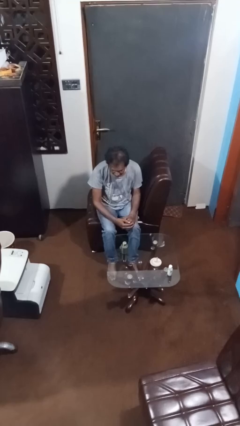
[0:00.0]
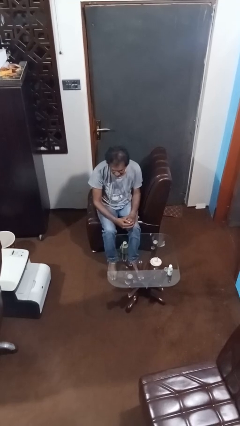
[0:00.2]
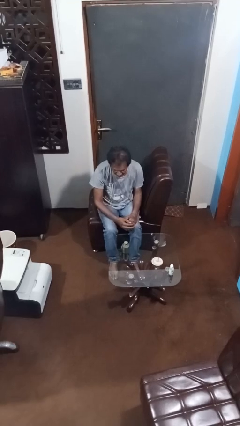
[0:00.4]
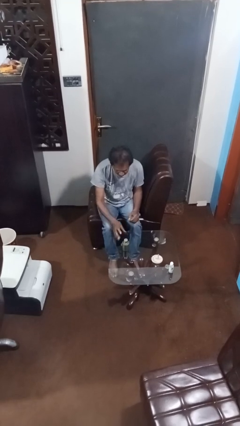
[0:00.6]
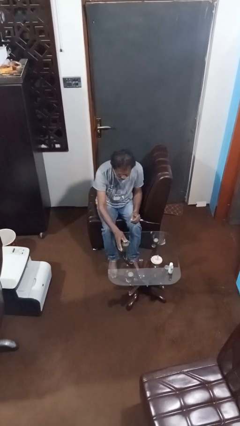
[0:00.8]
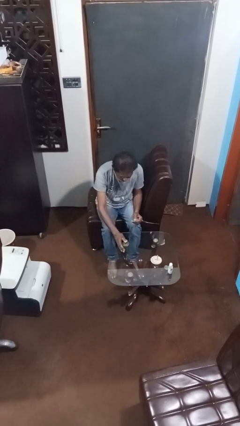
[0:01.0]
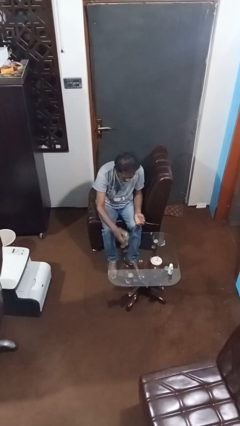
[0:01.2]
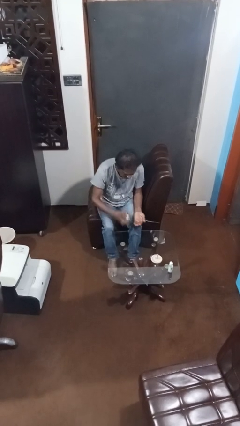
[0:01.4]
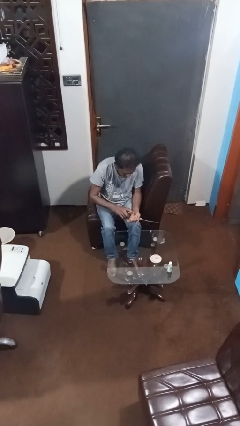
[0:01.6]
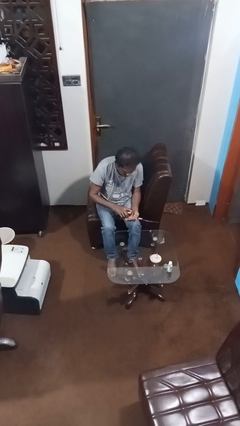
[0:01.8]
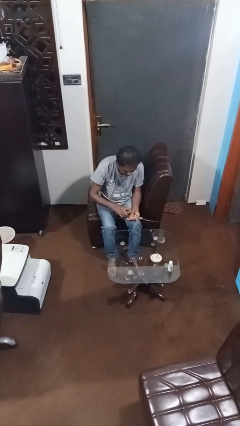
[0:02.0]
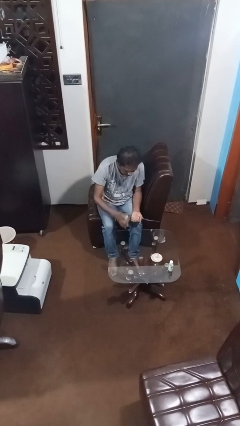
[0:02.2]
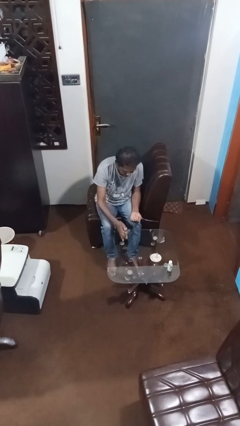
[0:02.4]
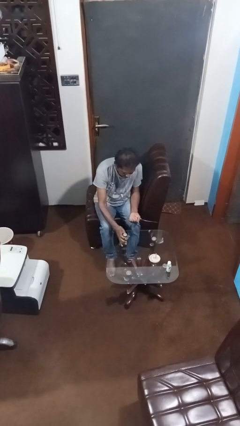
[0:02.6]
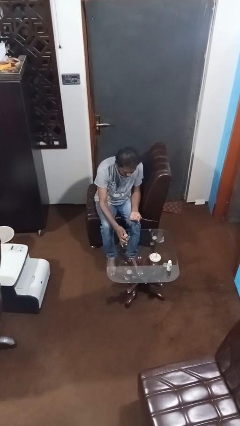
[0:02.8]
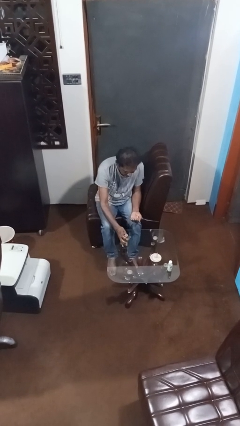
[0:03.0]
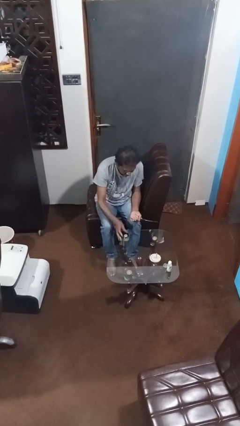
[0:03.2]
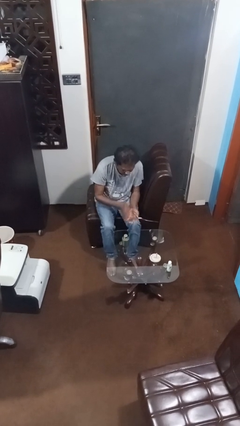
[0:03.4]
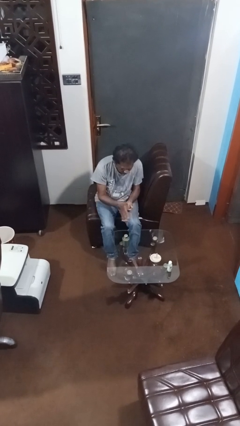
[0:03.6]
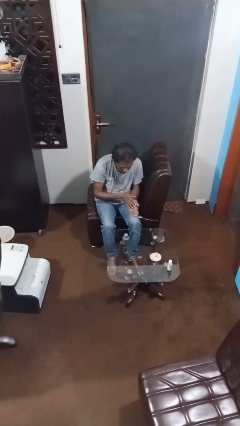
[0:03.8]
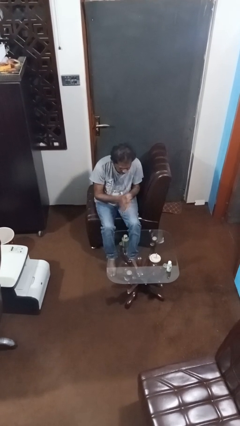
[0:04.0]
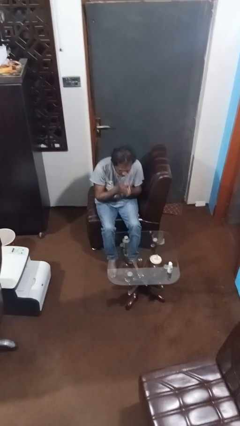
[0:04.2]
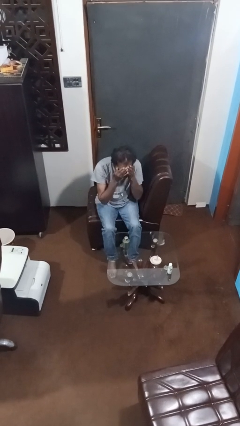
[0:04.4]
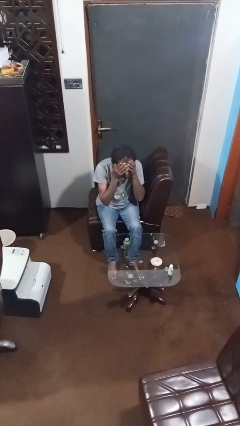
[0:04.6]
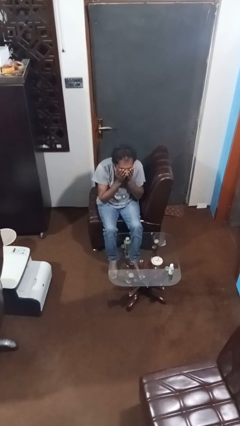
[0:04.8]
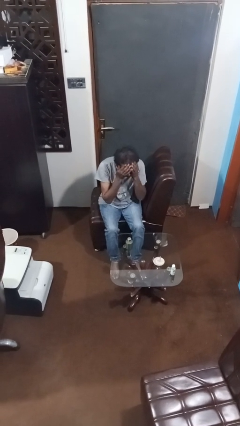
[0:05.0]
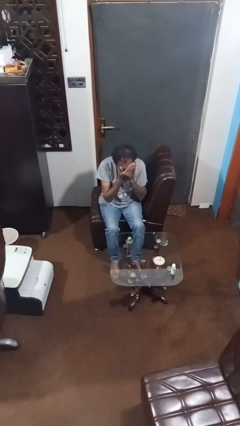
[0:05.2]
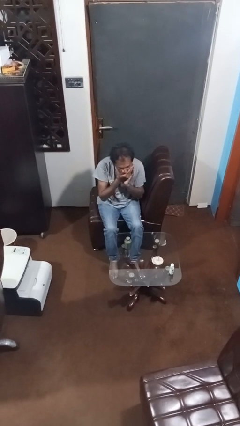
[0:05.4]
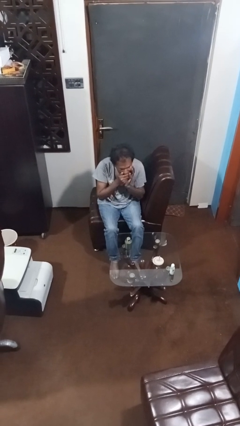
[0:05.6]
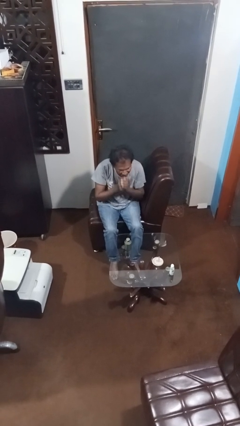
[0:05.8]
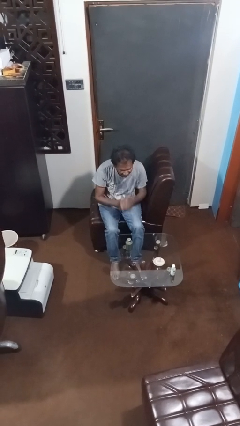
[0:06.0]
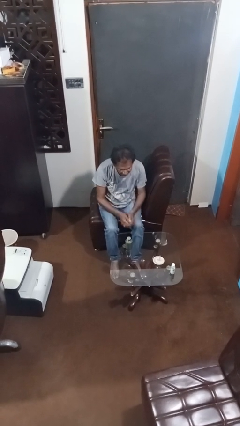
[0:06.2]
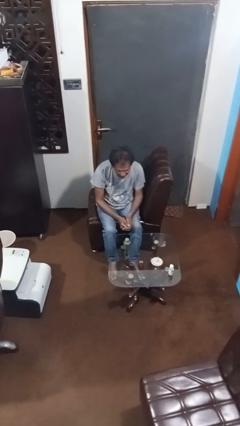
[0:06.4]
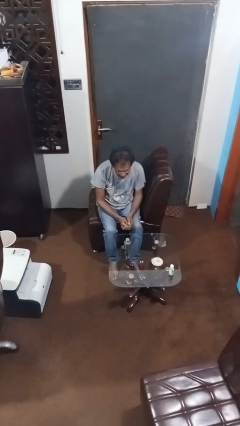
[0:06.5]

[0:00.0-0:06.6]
person applies facial moisturizer

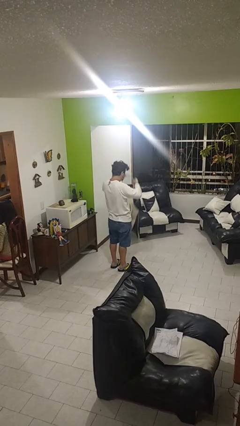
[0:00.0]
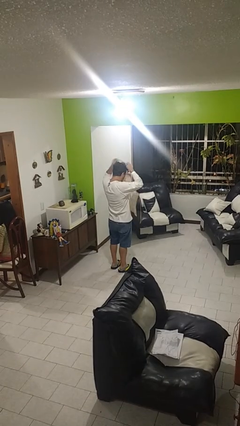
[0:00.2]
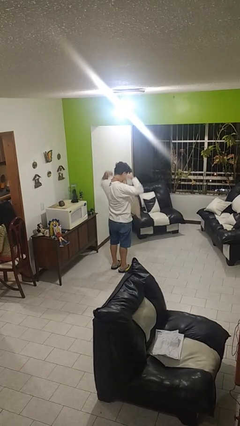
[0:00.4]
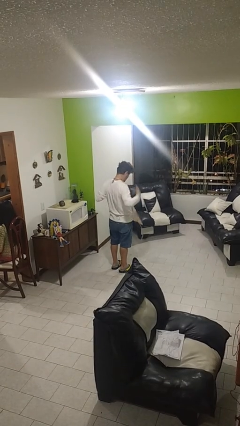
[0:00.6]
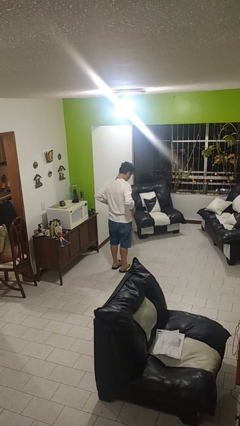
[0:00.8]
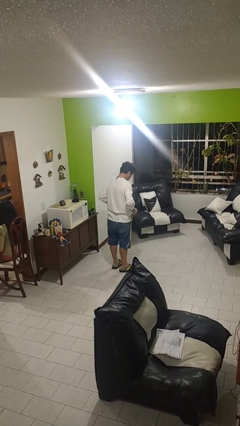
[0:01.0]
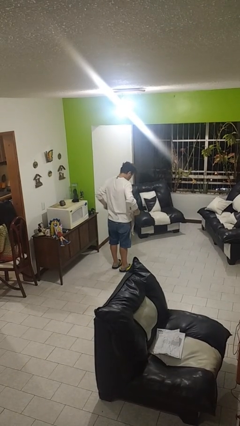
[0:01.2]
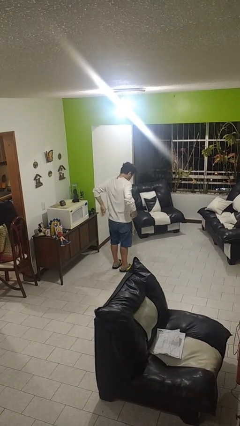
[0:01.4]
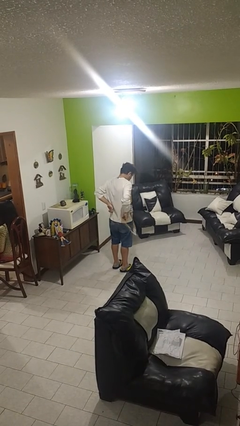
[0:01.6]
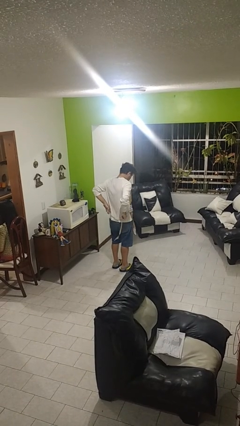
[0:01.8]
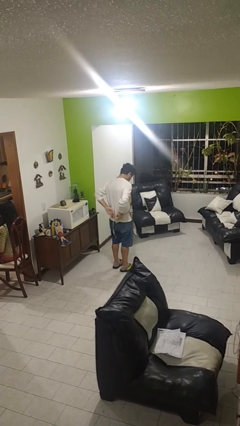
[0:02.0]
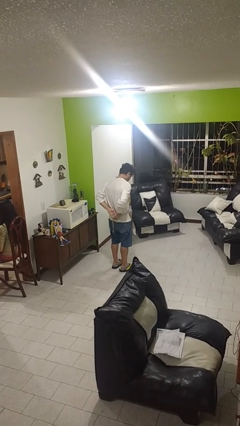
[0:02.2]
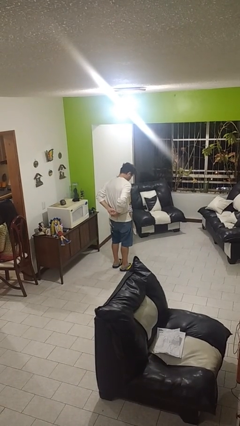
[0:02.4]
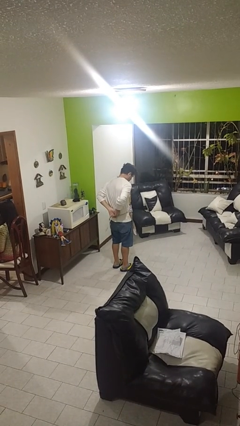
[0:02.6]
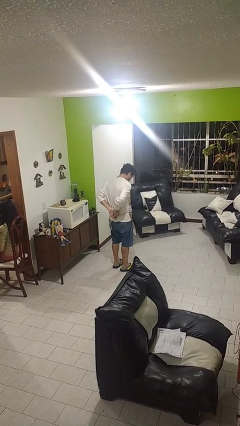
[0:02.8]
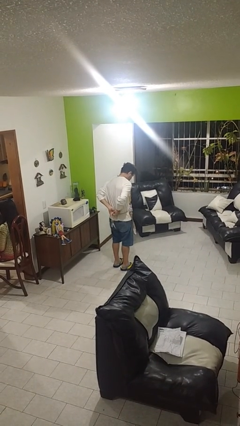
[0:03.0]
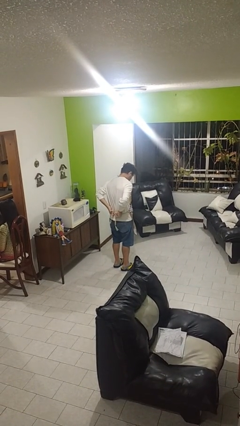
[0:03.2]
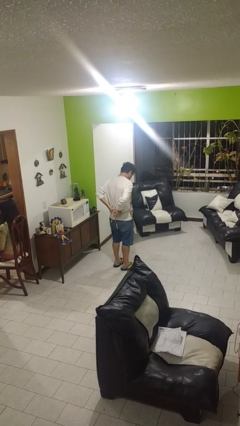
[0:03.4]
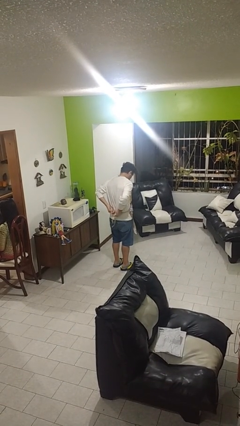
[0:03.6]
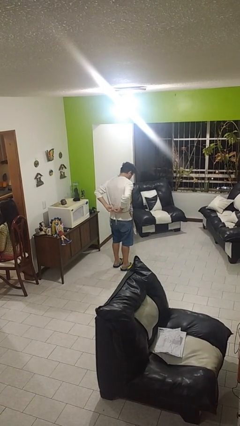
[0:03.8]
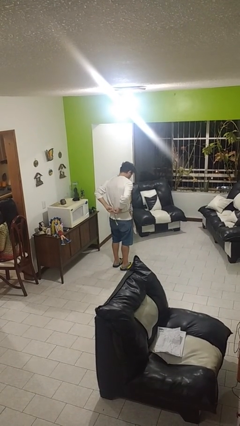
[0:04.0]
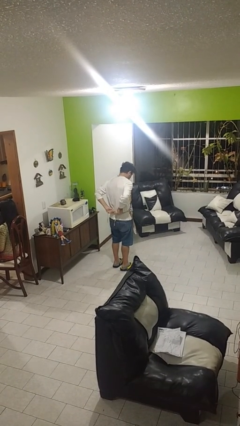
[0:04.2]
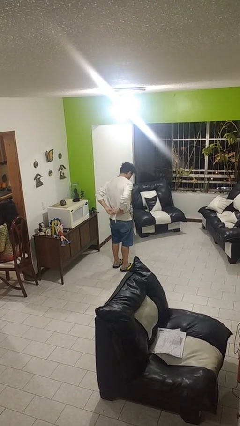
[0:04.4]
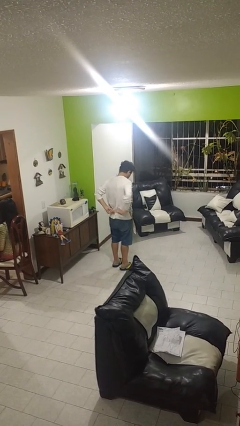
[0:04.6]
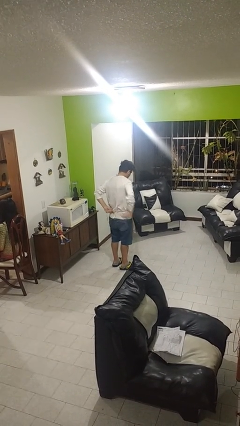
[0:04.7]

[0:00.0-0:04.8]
person puts on apron

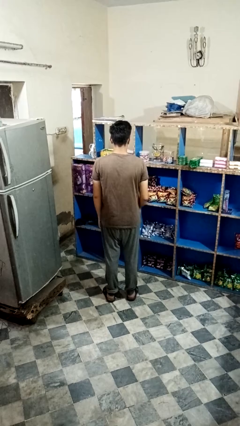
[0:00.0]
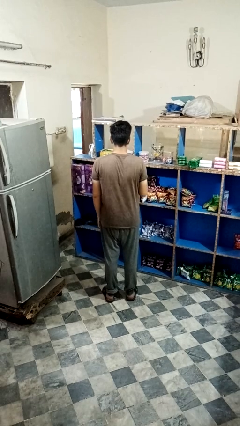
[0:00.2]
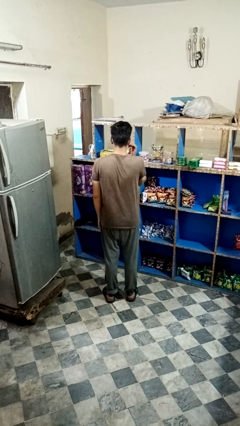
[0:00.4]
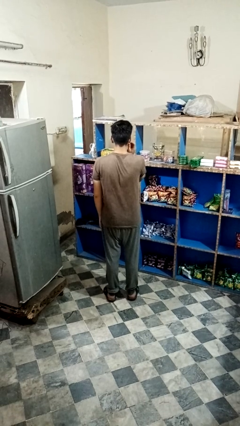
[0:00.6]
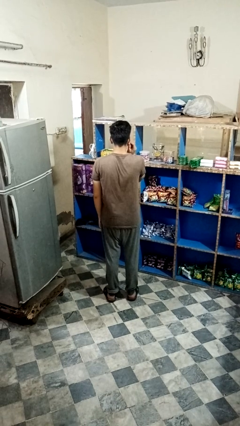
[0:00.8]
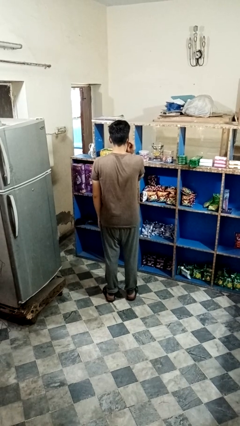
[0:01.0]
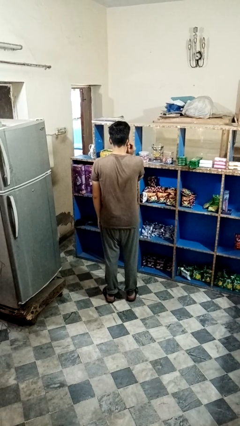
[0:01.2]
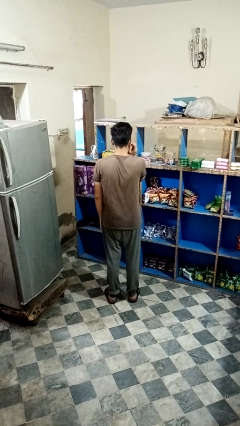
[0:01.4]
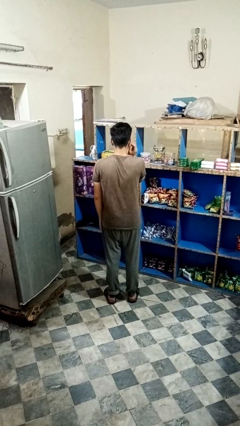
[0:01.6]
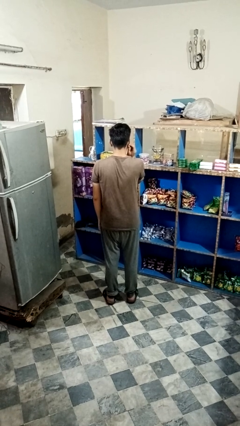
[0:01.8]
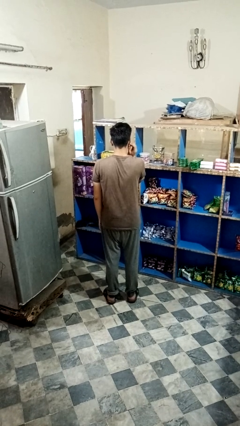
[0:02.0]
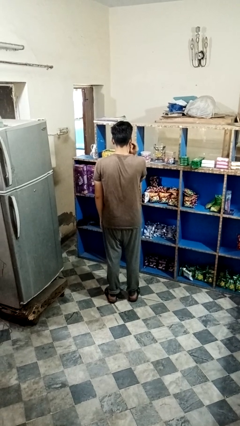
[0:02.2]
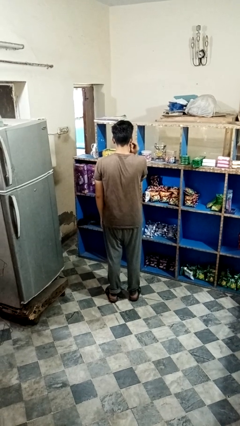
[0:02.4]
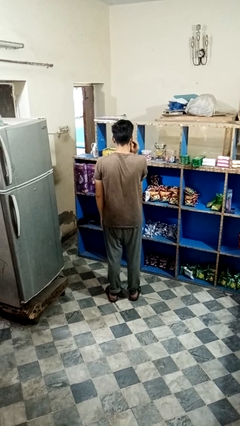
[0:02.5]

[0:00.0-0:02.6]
person touches earlobe

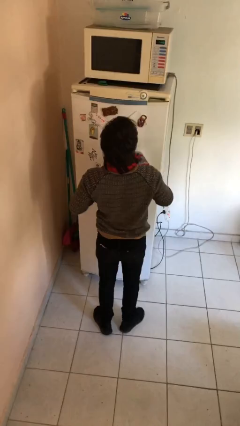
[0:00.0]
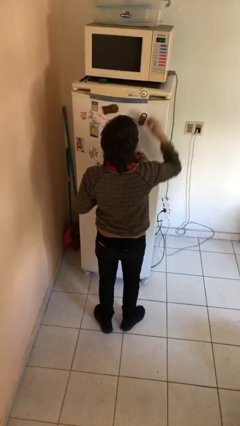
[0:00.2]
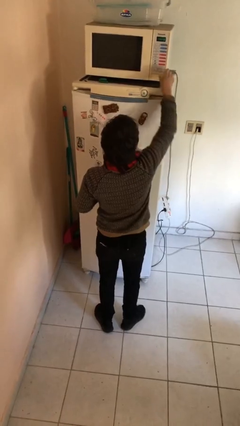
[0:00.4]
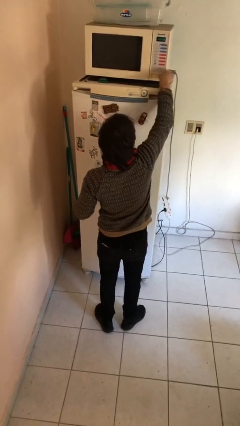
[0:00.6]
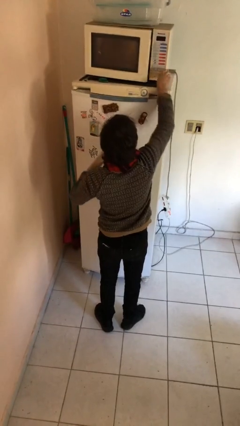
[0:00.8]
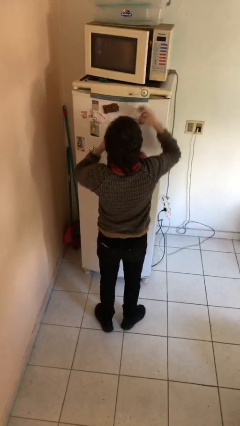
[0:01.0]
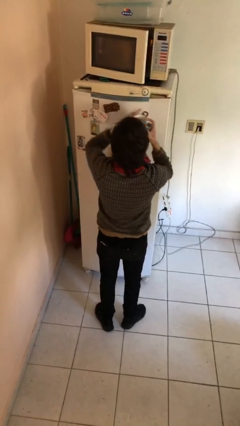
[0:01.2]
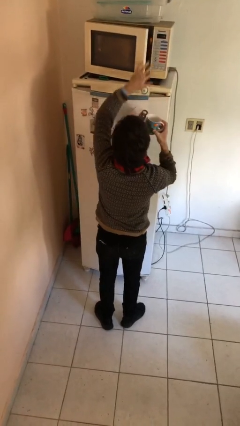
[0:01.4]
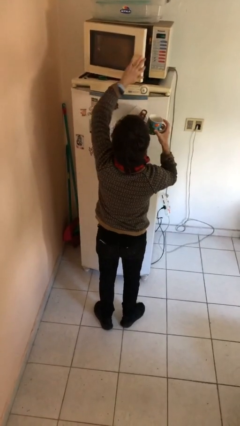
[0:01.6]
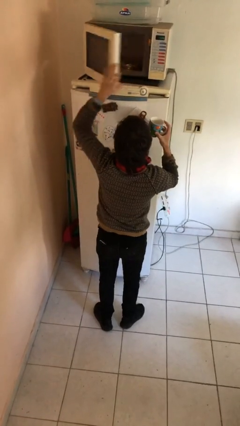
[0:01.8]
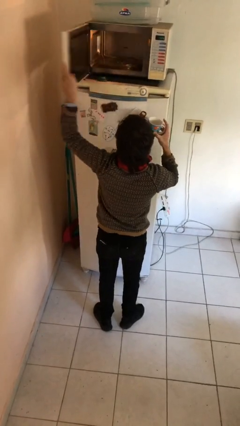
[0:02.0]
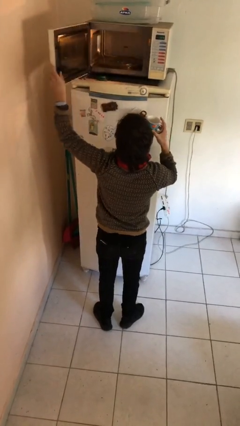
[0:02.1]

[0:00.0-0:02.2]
person opens microwave

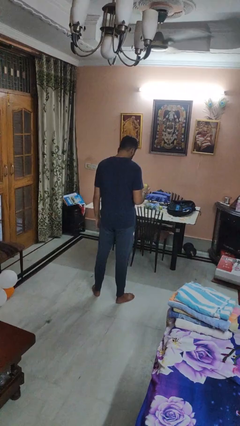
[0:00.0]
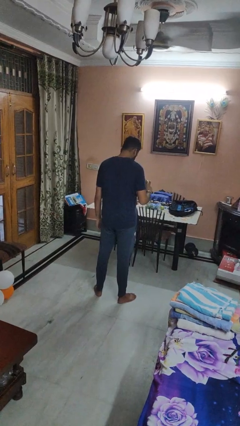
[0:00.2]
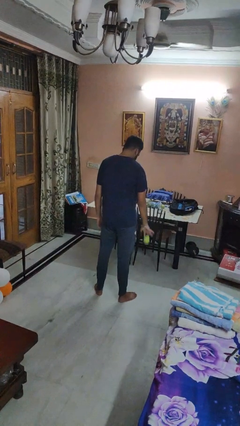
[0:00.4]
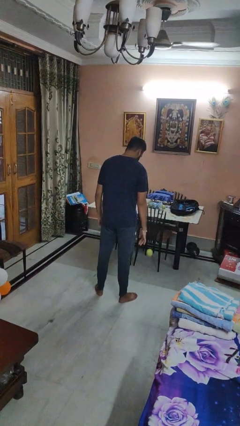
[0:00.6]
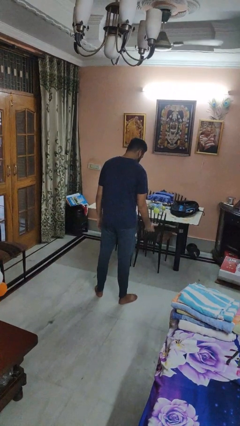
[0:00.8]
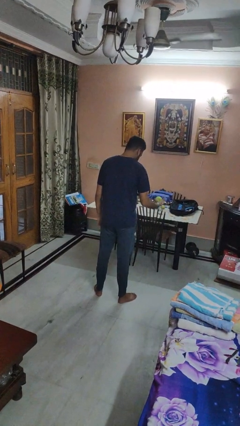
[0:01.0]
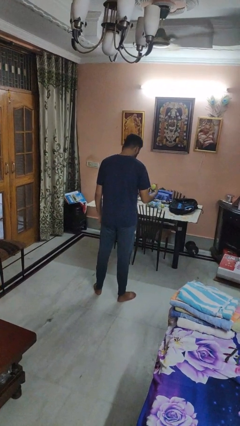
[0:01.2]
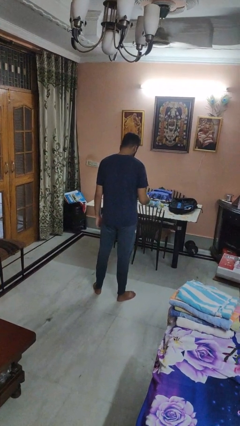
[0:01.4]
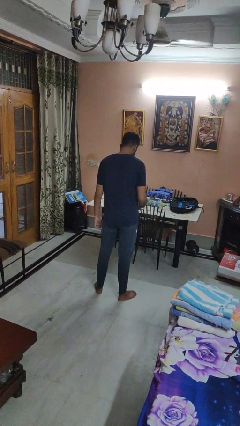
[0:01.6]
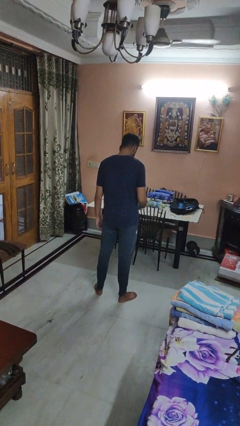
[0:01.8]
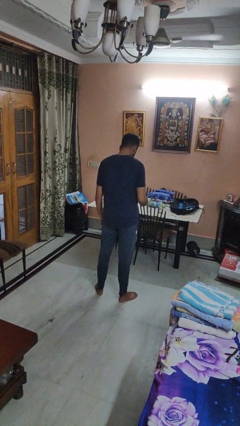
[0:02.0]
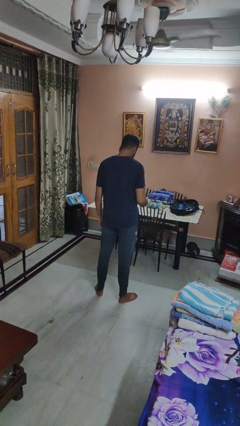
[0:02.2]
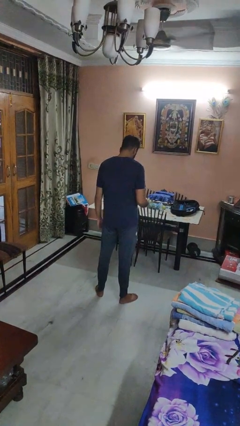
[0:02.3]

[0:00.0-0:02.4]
person bounces ball on floor
